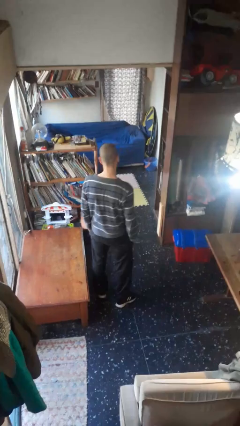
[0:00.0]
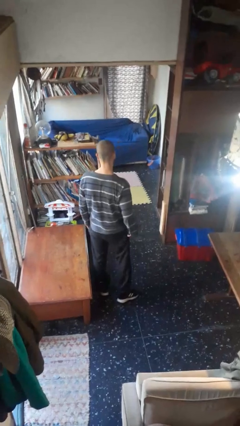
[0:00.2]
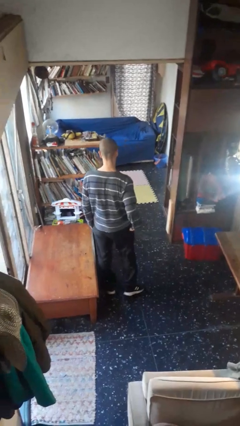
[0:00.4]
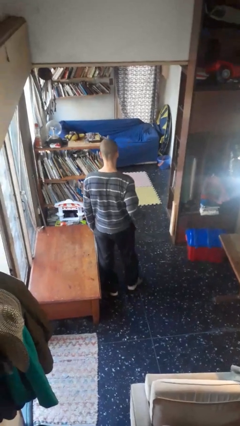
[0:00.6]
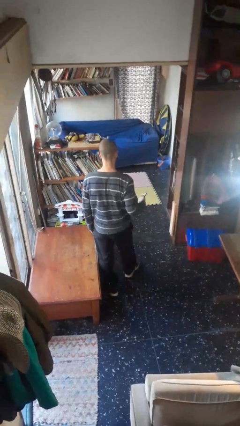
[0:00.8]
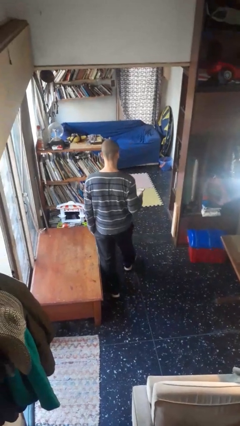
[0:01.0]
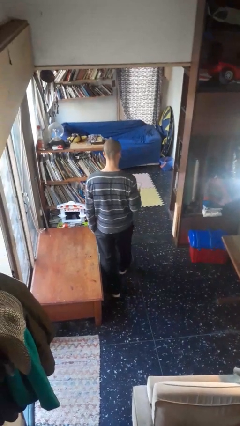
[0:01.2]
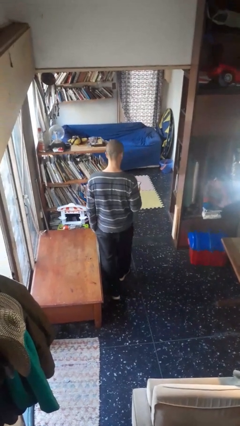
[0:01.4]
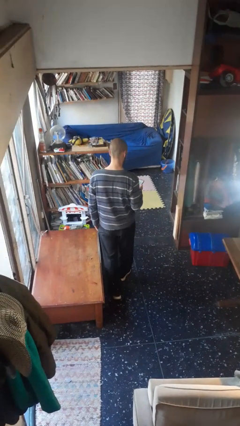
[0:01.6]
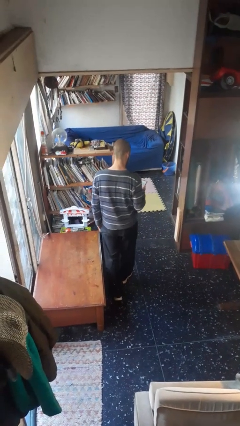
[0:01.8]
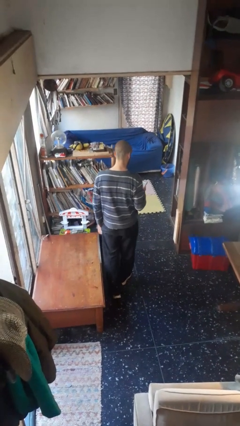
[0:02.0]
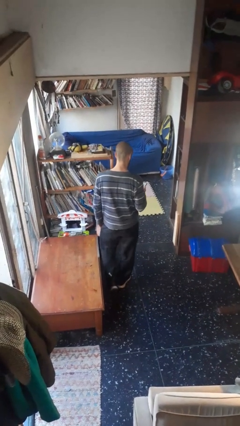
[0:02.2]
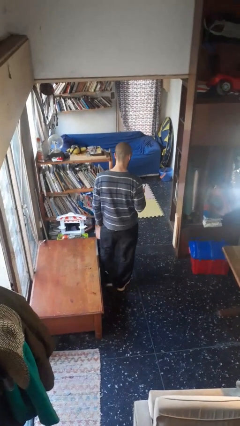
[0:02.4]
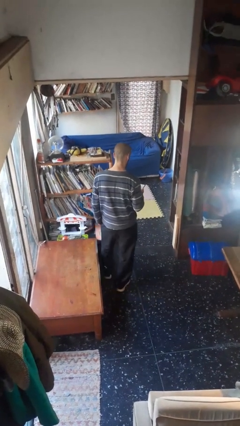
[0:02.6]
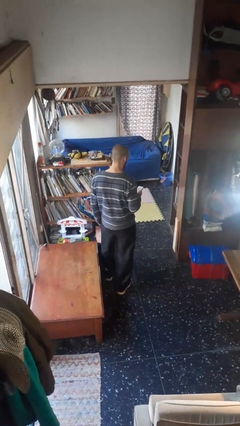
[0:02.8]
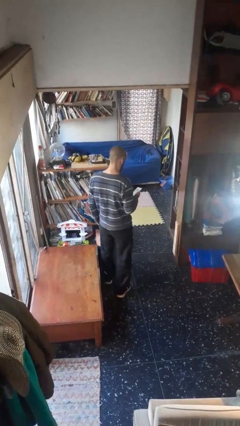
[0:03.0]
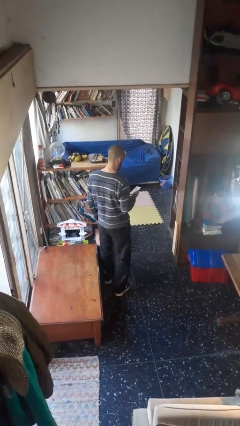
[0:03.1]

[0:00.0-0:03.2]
person takes phone from pocket

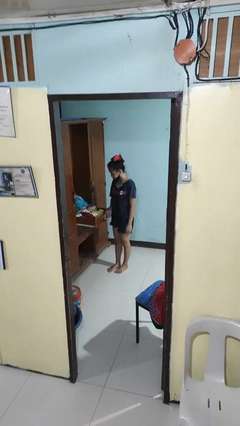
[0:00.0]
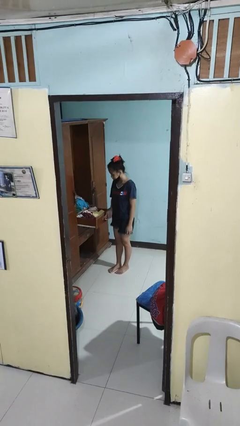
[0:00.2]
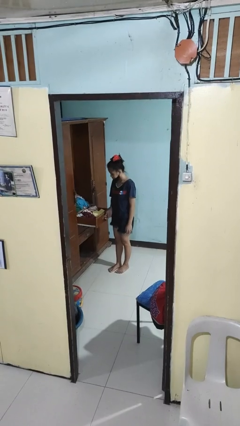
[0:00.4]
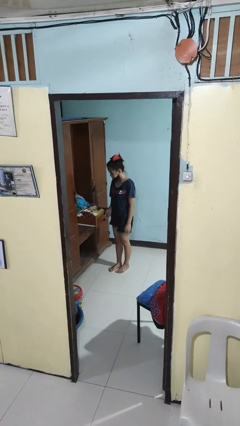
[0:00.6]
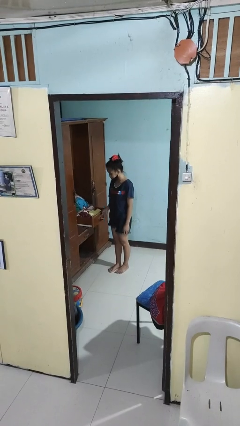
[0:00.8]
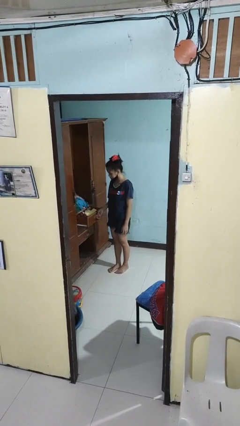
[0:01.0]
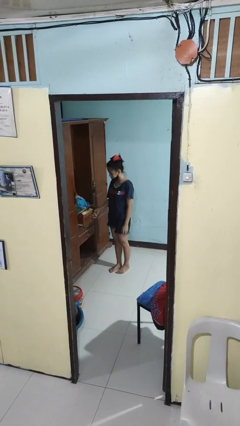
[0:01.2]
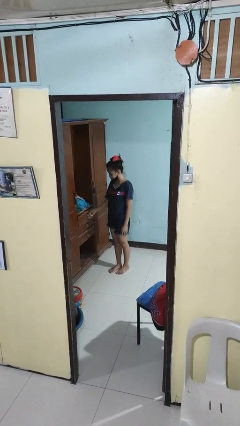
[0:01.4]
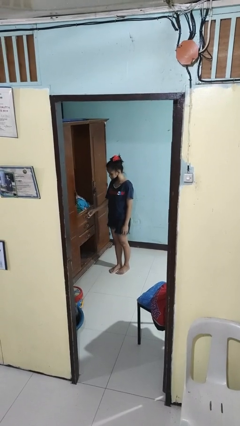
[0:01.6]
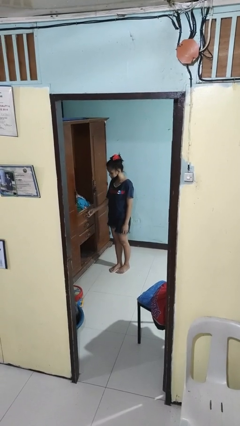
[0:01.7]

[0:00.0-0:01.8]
person closes dresser drawer

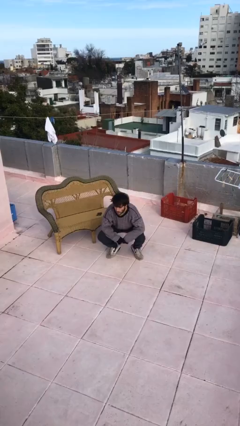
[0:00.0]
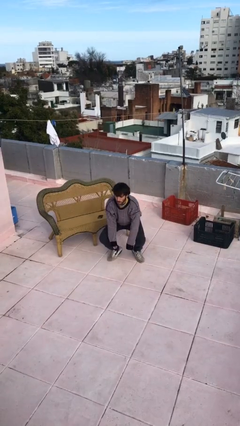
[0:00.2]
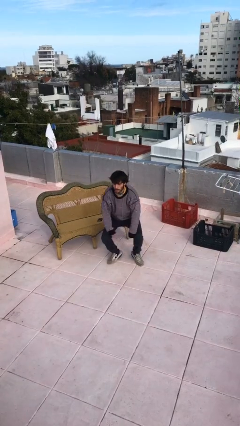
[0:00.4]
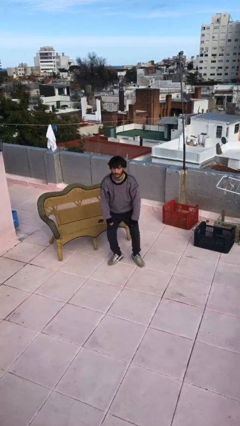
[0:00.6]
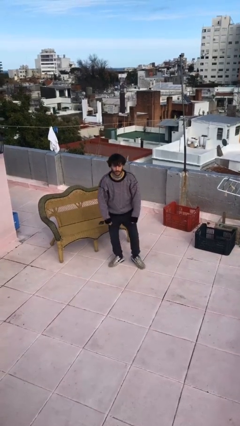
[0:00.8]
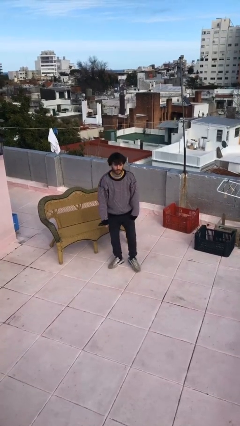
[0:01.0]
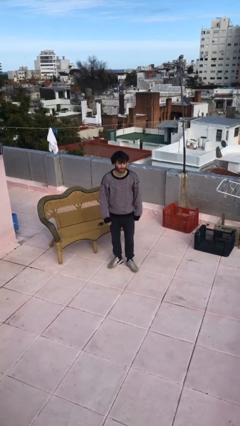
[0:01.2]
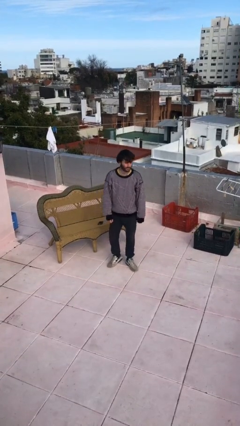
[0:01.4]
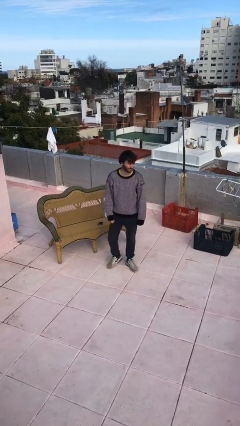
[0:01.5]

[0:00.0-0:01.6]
person stands up

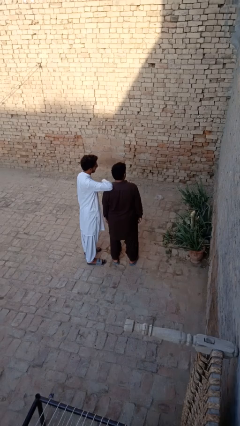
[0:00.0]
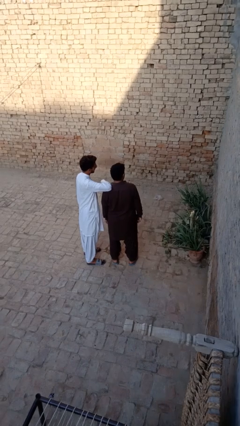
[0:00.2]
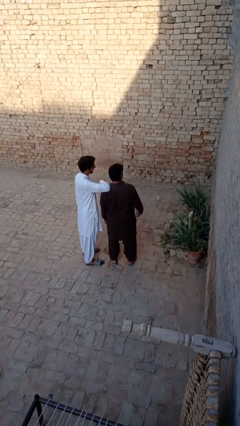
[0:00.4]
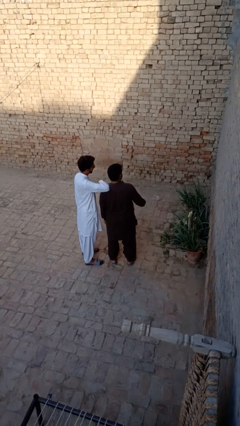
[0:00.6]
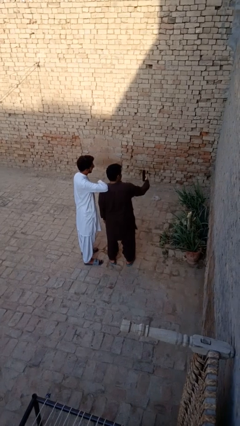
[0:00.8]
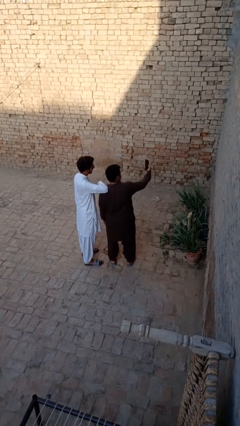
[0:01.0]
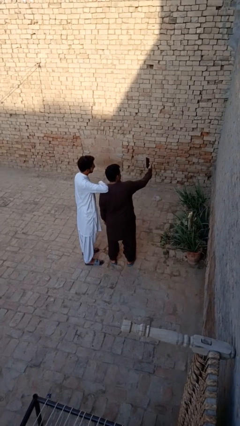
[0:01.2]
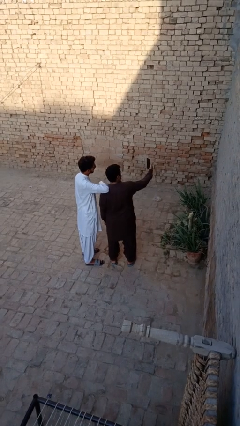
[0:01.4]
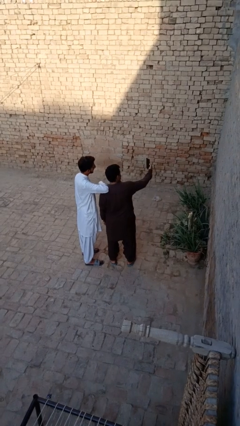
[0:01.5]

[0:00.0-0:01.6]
person takes selfie with person

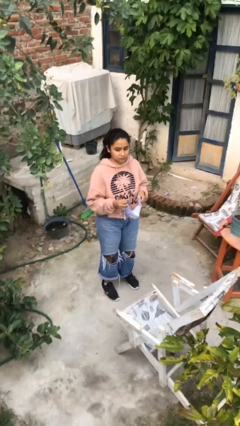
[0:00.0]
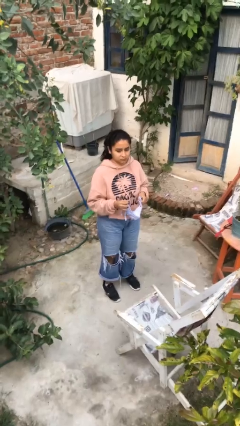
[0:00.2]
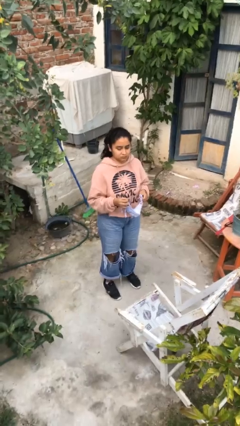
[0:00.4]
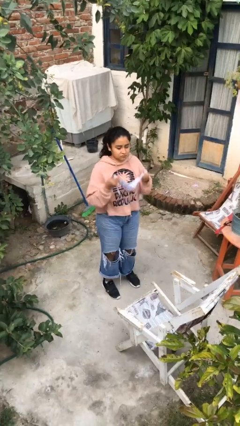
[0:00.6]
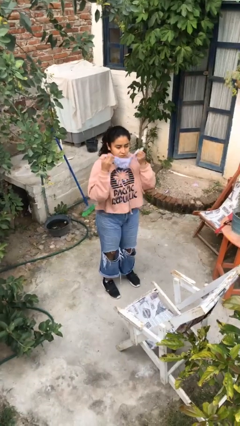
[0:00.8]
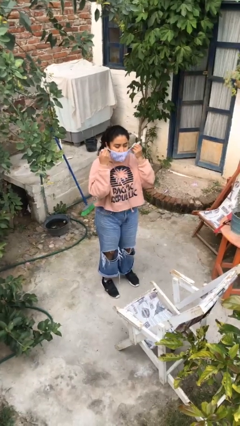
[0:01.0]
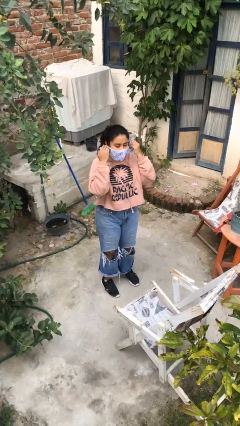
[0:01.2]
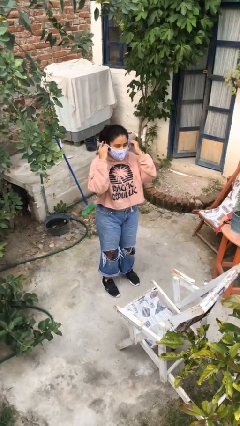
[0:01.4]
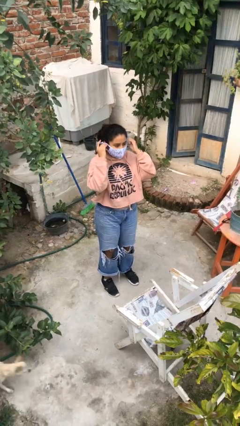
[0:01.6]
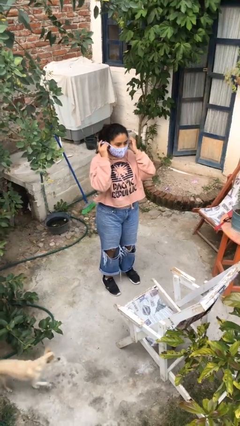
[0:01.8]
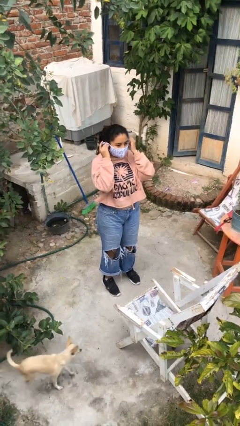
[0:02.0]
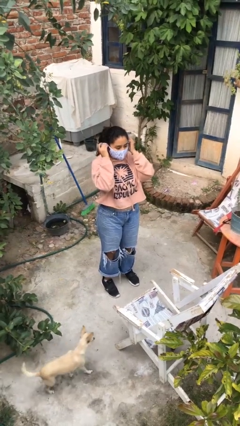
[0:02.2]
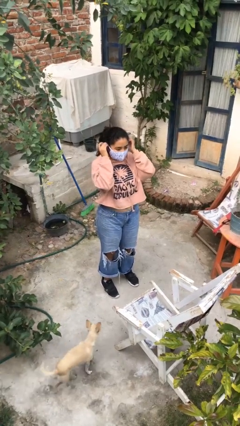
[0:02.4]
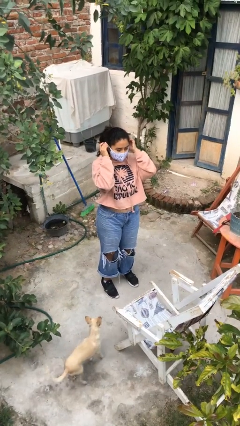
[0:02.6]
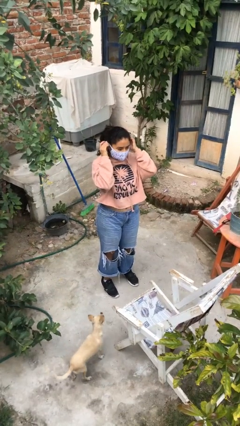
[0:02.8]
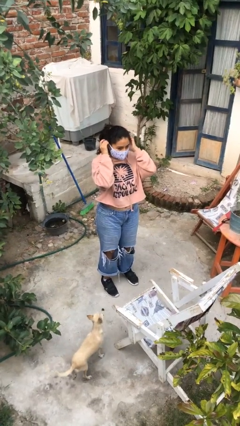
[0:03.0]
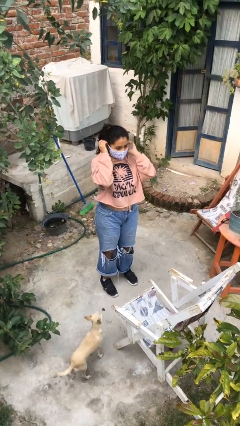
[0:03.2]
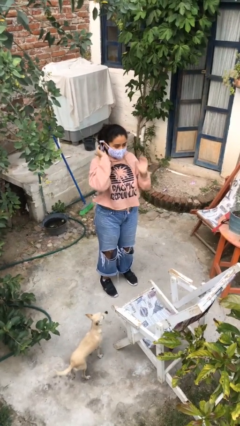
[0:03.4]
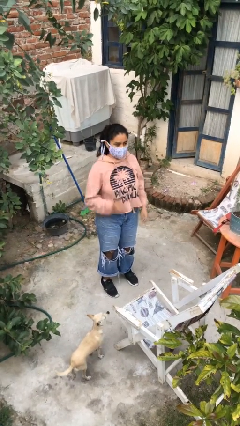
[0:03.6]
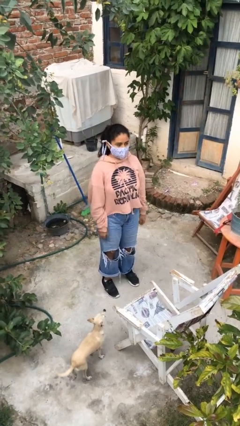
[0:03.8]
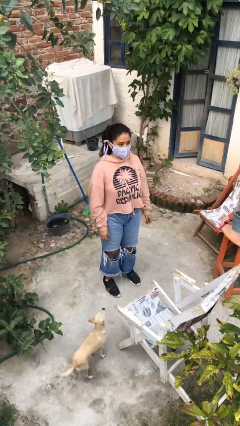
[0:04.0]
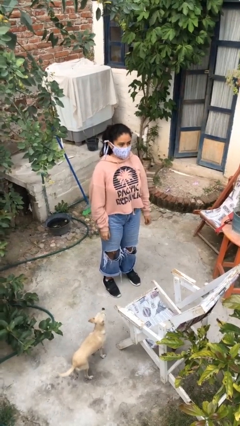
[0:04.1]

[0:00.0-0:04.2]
person puts on facemask

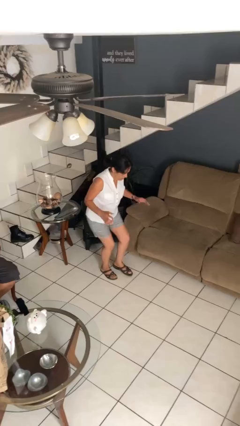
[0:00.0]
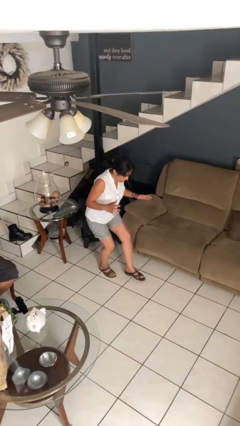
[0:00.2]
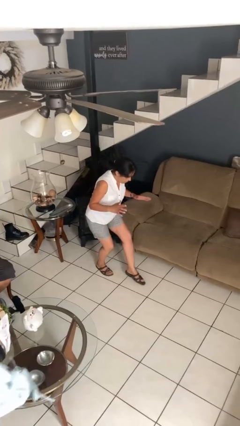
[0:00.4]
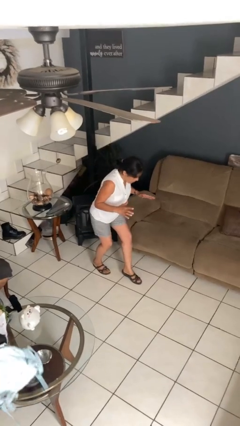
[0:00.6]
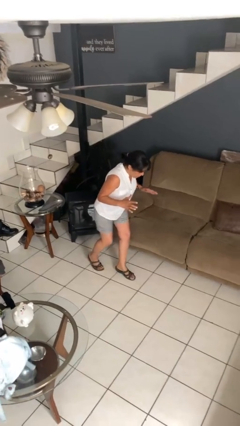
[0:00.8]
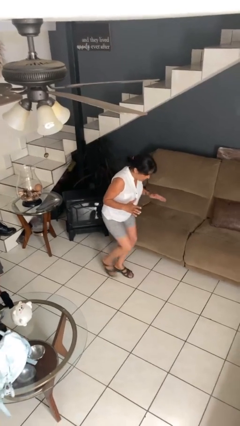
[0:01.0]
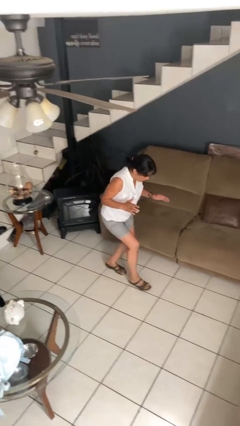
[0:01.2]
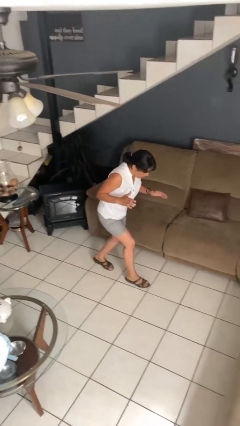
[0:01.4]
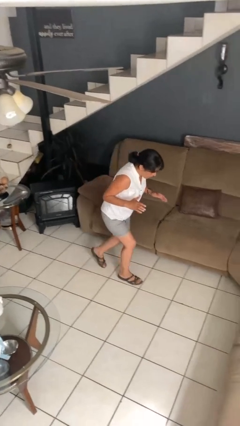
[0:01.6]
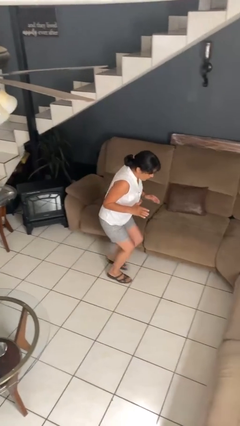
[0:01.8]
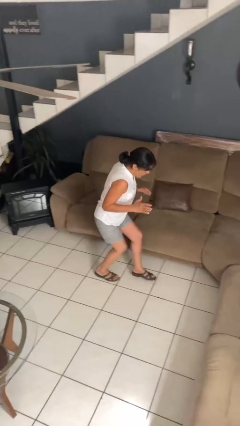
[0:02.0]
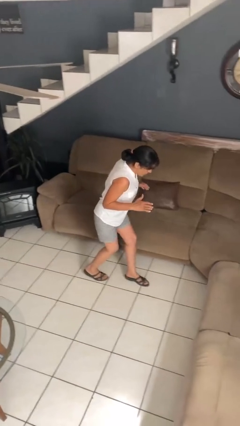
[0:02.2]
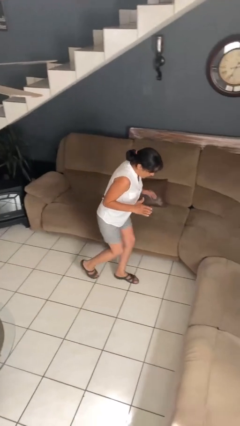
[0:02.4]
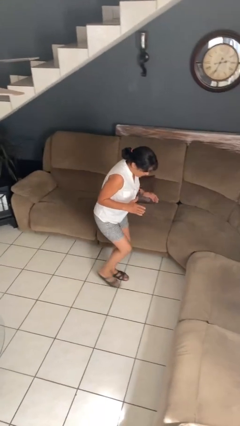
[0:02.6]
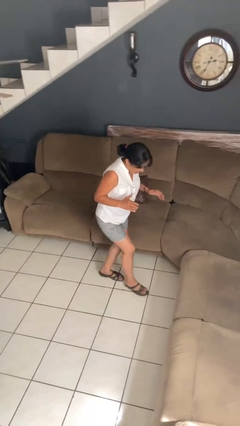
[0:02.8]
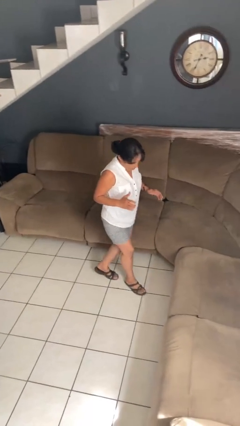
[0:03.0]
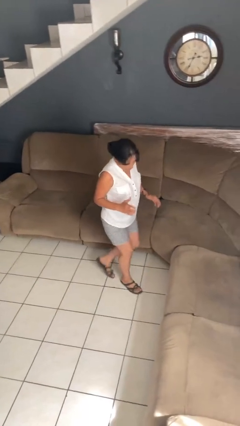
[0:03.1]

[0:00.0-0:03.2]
person walks tiptoe

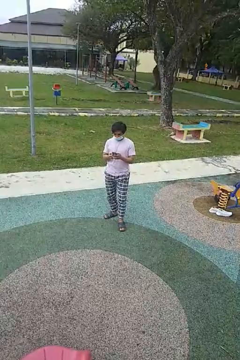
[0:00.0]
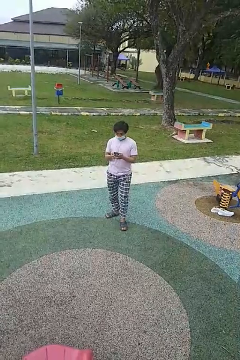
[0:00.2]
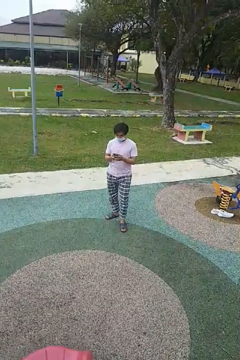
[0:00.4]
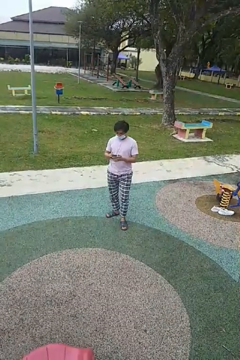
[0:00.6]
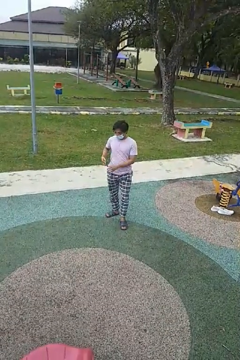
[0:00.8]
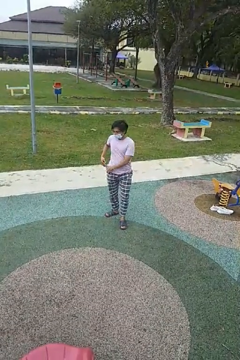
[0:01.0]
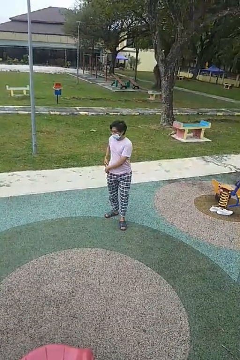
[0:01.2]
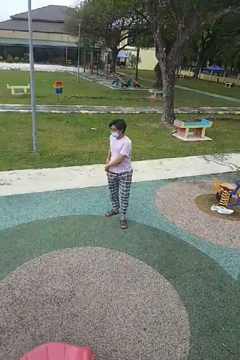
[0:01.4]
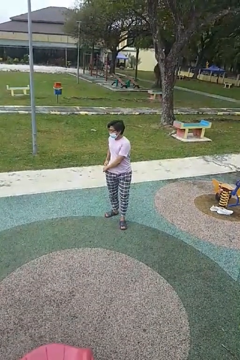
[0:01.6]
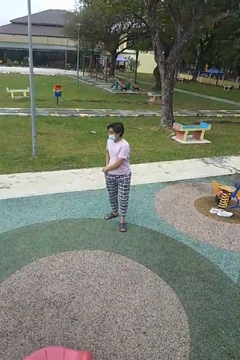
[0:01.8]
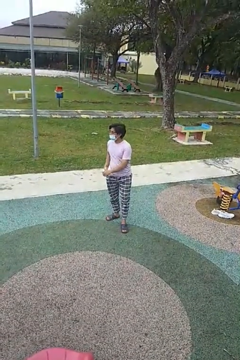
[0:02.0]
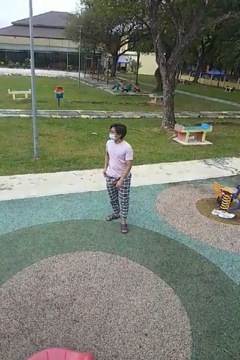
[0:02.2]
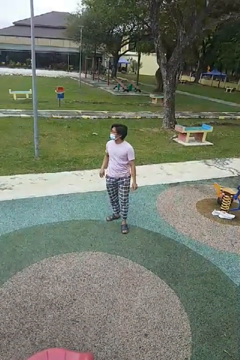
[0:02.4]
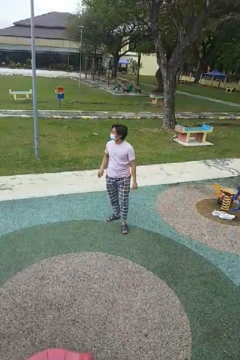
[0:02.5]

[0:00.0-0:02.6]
person puts phone into pocket
